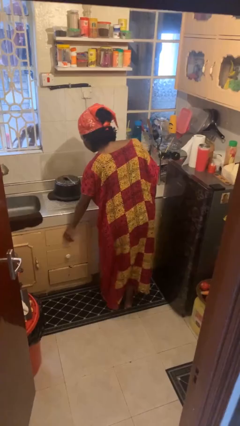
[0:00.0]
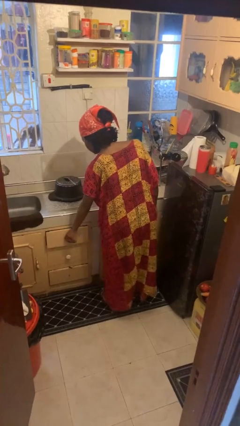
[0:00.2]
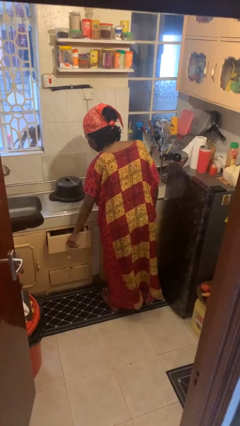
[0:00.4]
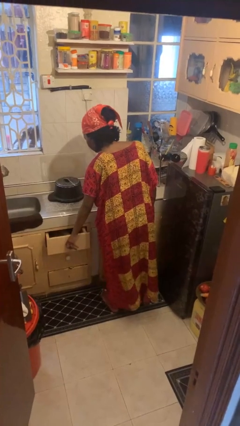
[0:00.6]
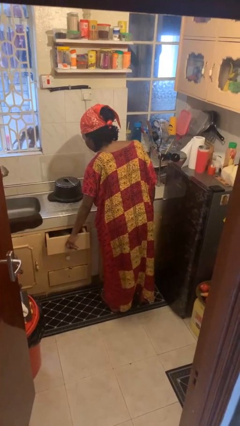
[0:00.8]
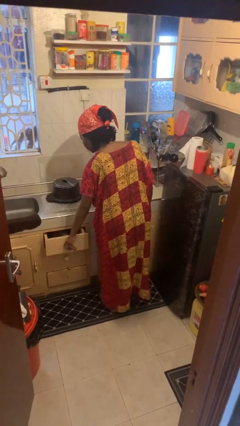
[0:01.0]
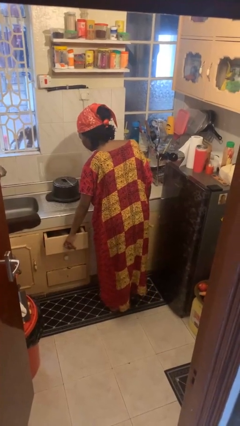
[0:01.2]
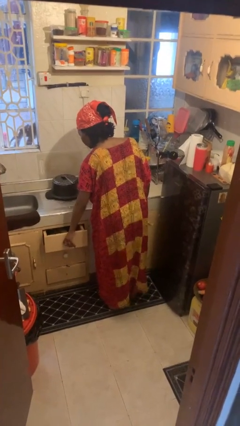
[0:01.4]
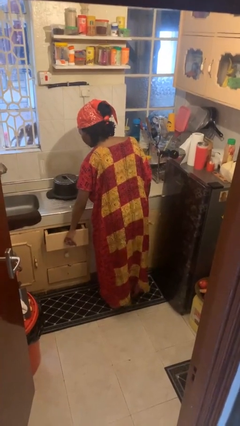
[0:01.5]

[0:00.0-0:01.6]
person opens kitchen drawer

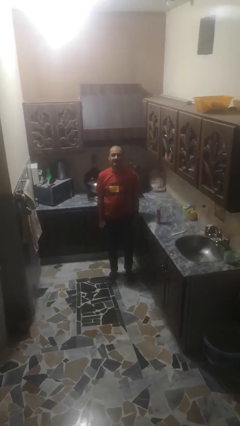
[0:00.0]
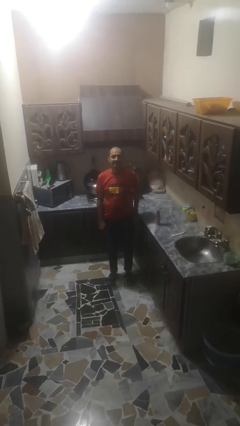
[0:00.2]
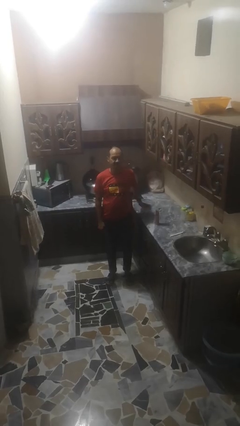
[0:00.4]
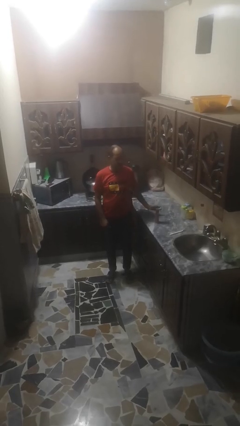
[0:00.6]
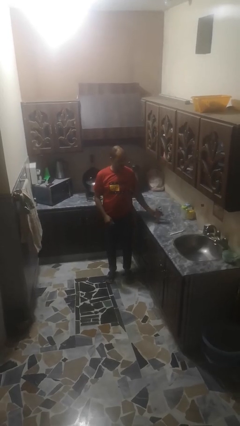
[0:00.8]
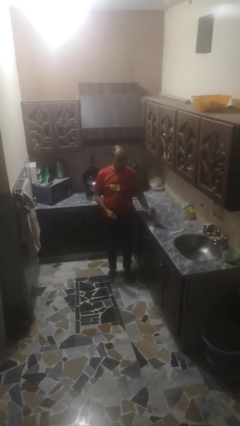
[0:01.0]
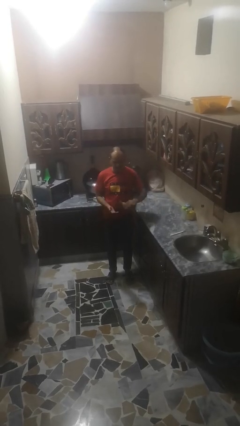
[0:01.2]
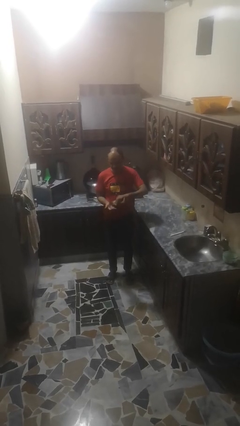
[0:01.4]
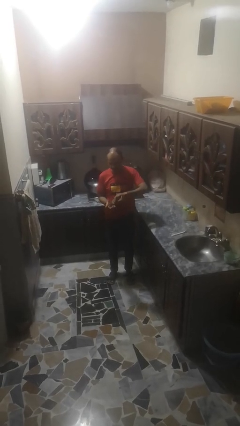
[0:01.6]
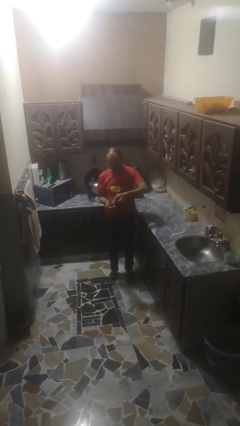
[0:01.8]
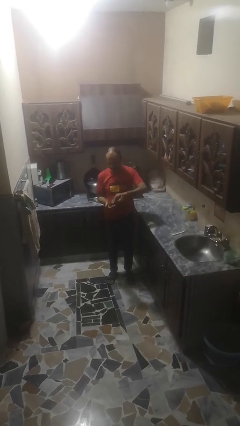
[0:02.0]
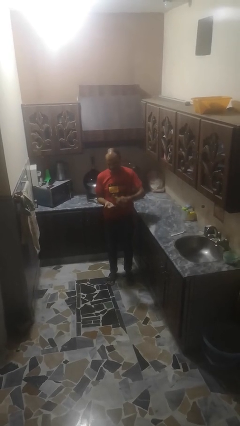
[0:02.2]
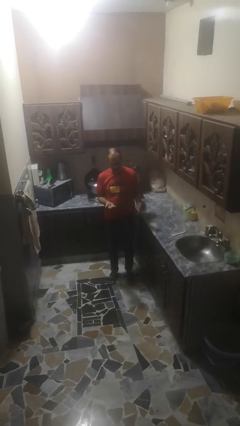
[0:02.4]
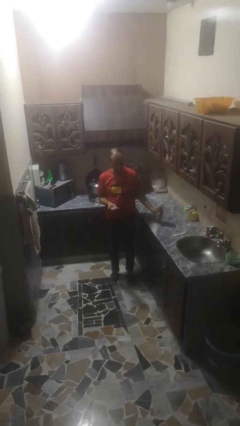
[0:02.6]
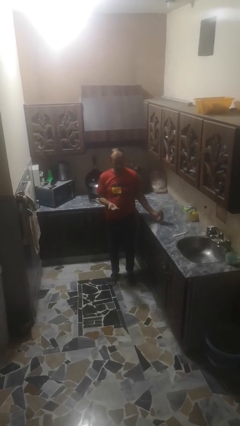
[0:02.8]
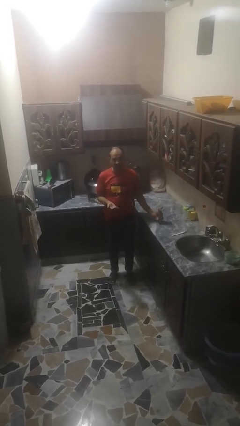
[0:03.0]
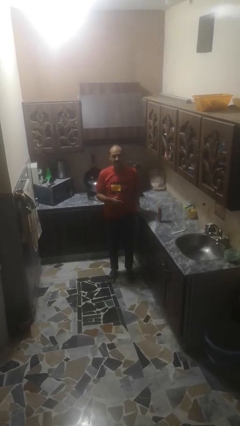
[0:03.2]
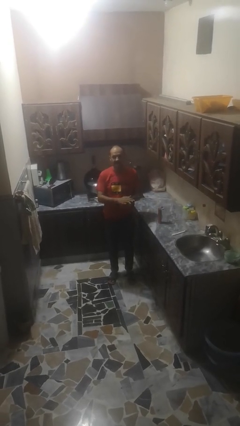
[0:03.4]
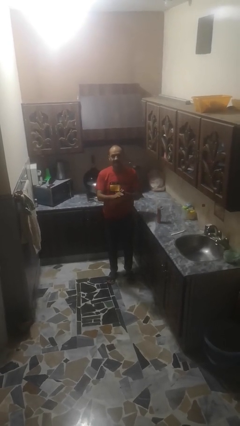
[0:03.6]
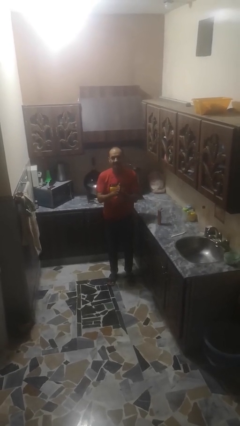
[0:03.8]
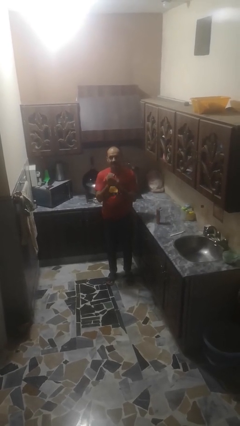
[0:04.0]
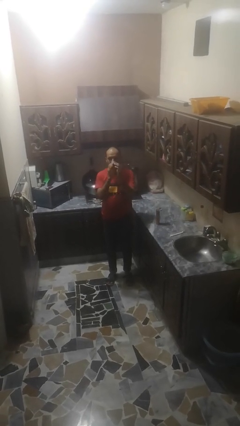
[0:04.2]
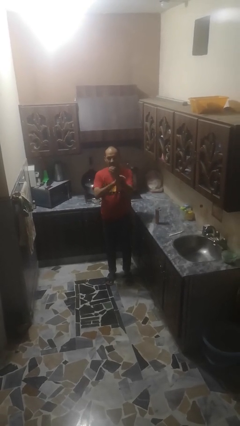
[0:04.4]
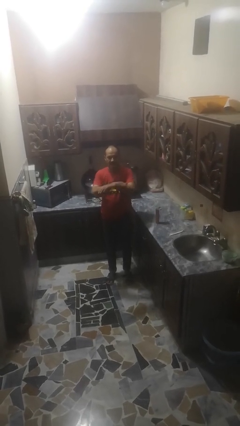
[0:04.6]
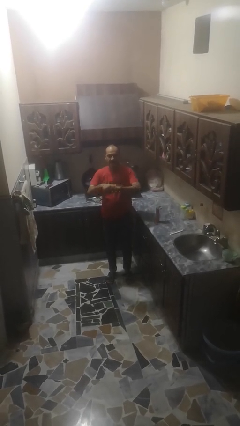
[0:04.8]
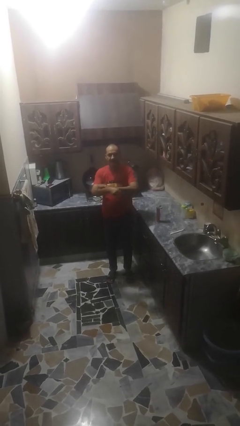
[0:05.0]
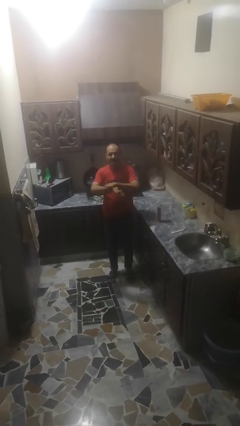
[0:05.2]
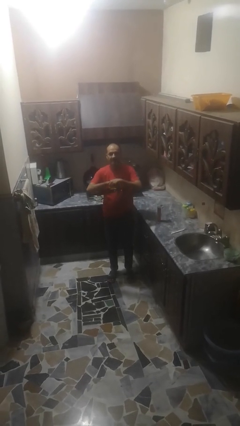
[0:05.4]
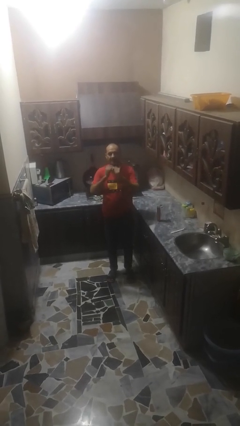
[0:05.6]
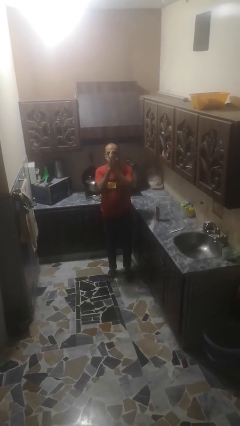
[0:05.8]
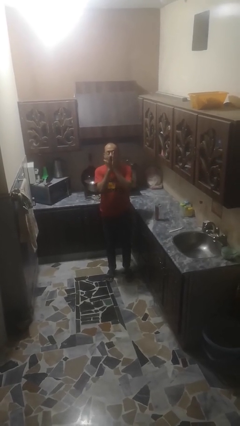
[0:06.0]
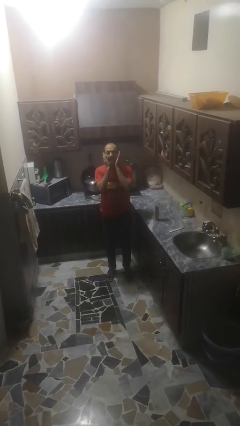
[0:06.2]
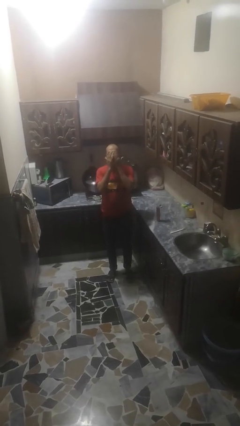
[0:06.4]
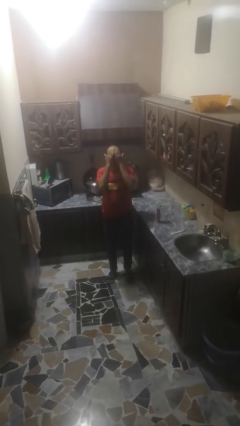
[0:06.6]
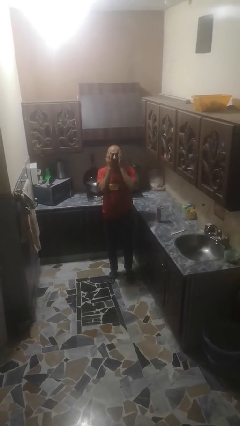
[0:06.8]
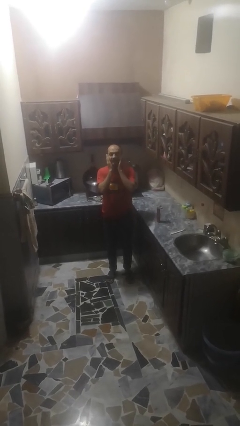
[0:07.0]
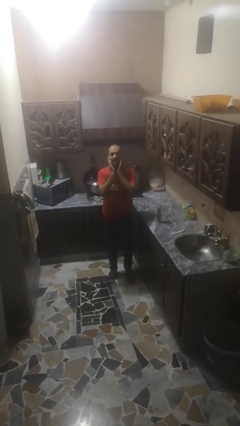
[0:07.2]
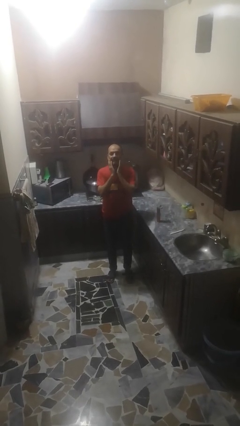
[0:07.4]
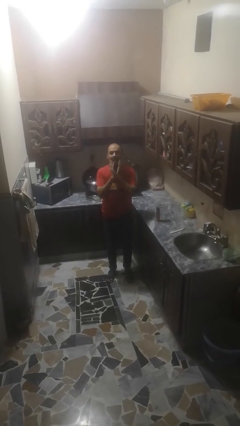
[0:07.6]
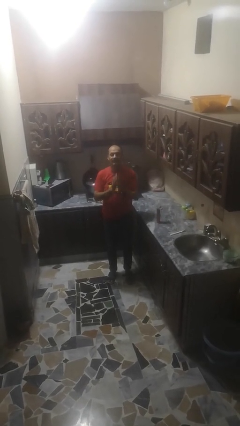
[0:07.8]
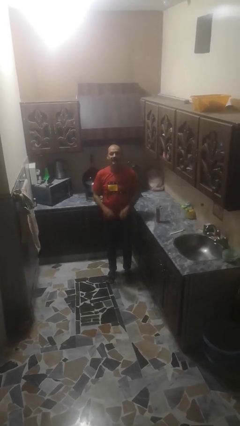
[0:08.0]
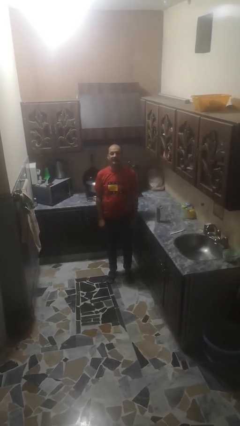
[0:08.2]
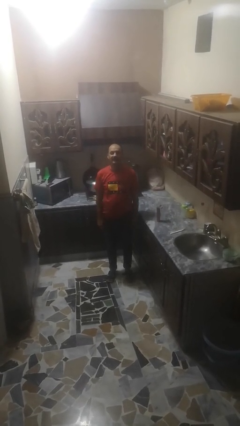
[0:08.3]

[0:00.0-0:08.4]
person applies sunscreen

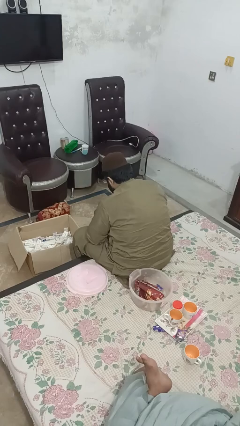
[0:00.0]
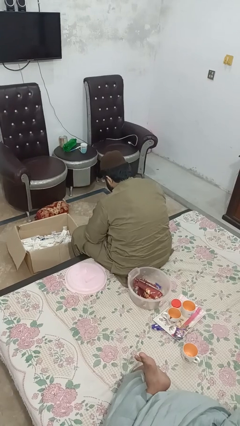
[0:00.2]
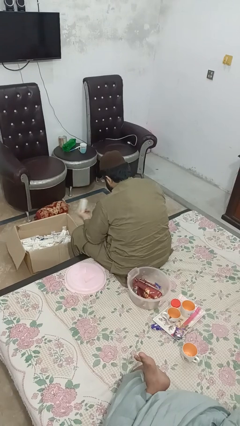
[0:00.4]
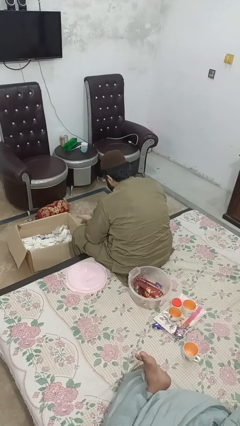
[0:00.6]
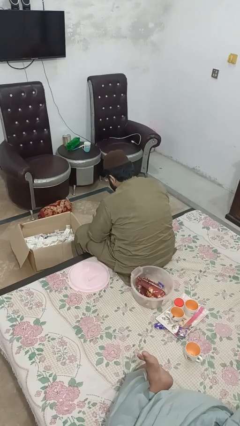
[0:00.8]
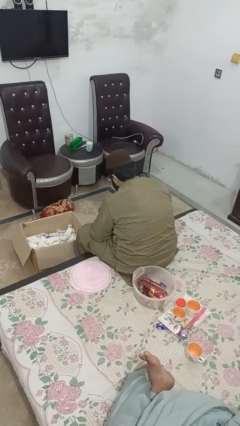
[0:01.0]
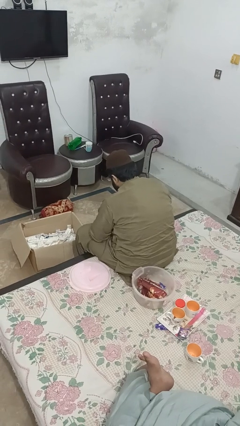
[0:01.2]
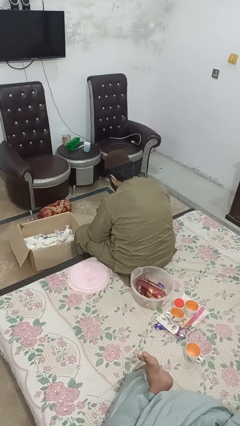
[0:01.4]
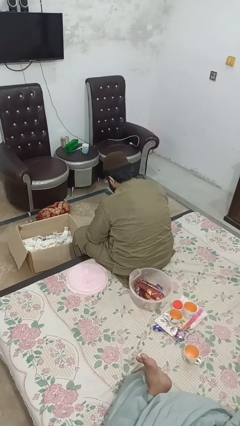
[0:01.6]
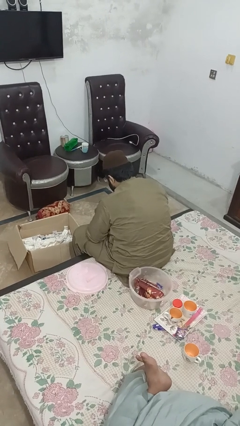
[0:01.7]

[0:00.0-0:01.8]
person puts object into box

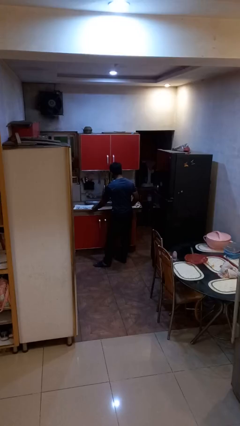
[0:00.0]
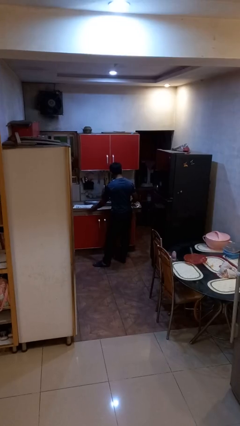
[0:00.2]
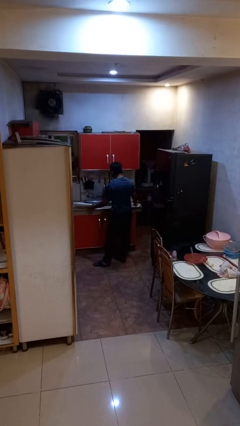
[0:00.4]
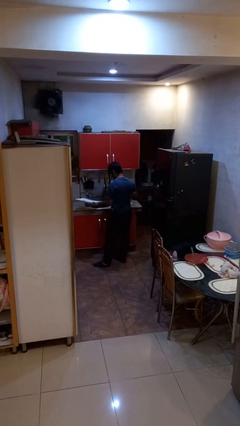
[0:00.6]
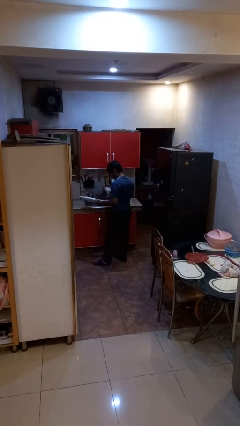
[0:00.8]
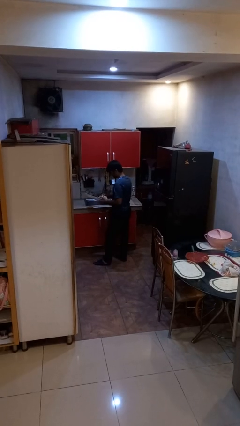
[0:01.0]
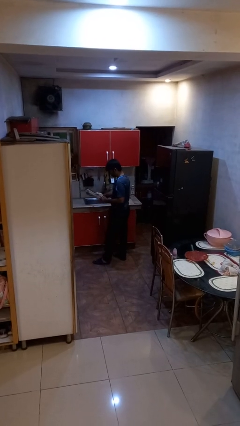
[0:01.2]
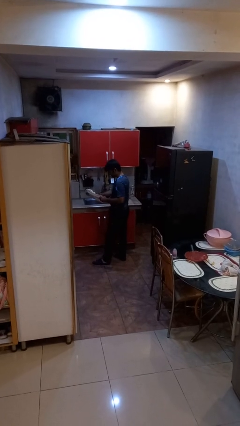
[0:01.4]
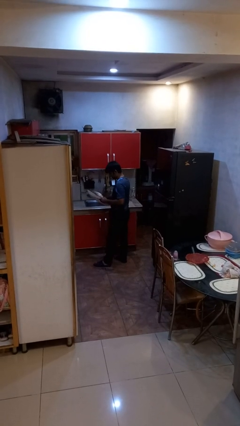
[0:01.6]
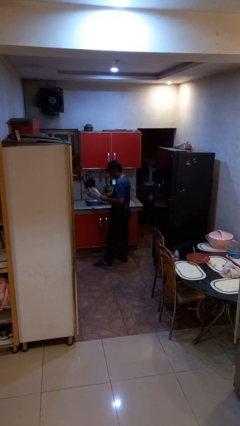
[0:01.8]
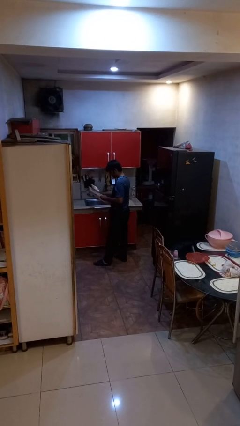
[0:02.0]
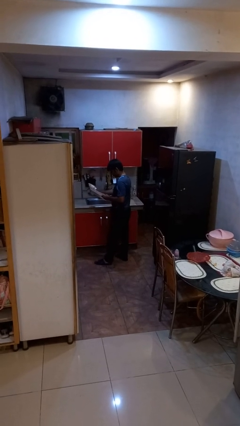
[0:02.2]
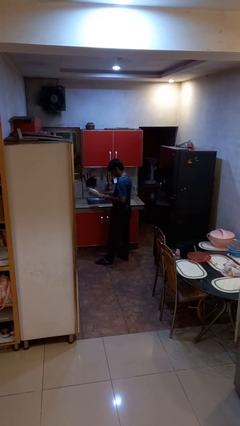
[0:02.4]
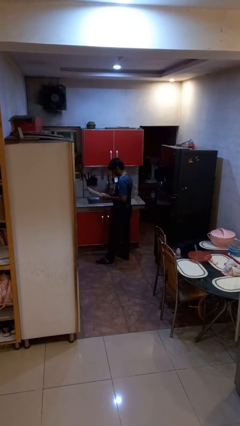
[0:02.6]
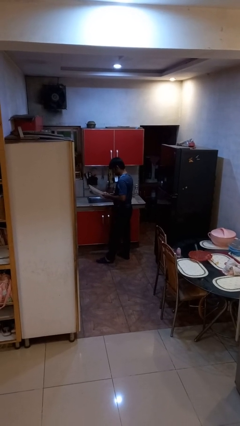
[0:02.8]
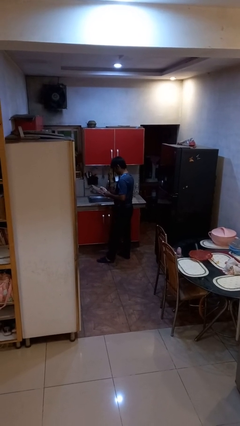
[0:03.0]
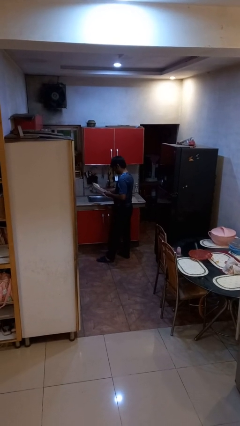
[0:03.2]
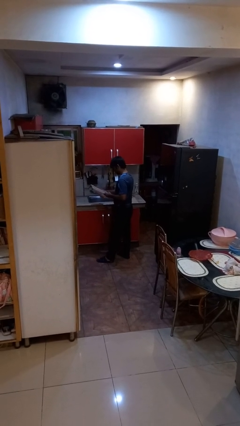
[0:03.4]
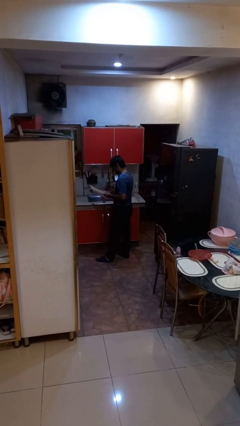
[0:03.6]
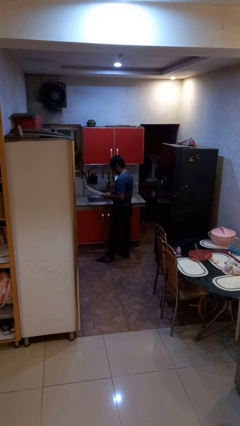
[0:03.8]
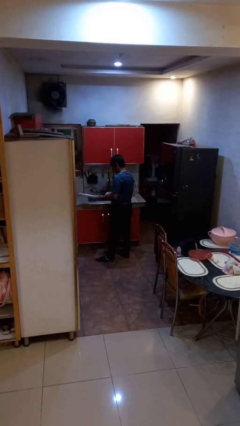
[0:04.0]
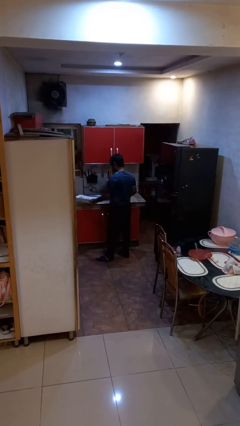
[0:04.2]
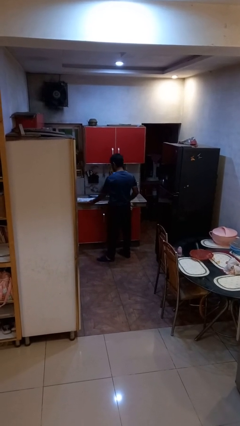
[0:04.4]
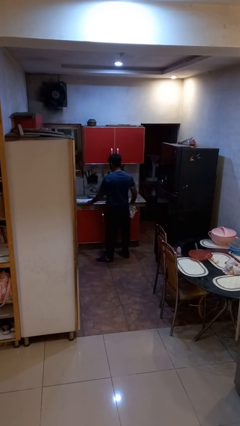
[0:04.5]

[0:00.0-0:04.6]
person dries dish

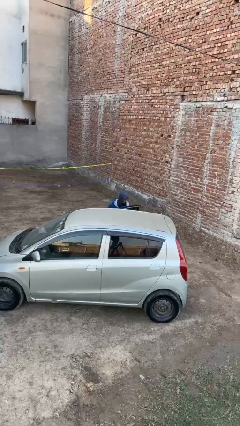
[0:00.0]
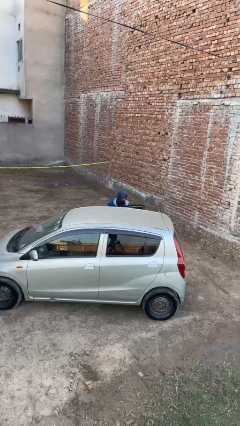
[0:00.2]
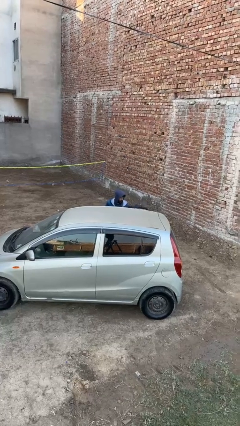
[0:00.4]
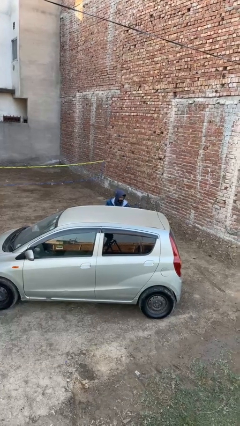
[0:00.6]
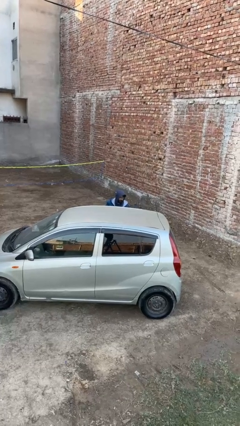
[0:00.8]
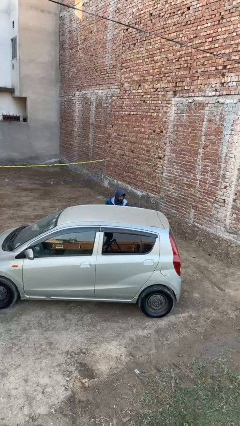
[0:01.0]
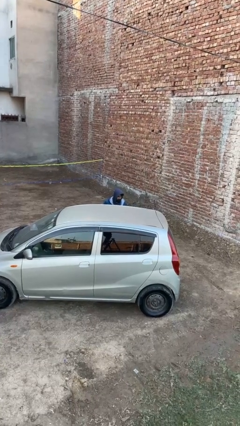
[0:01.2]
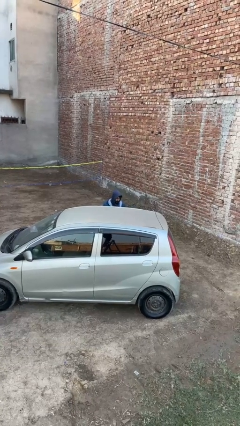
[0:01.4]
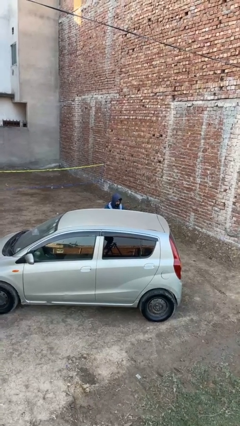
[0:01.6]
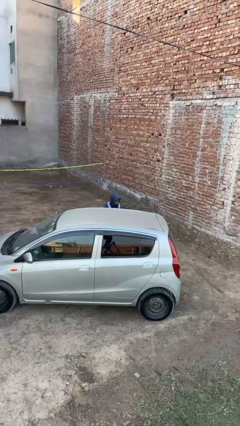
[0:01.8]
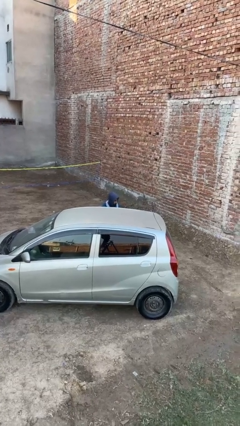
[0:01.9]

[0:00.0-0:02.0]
person closes car door
